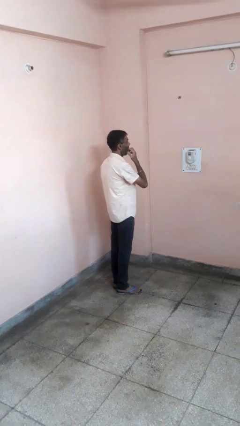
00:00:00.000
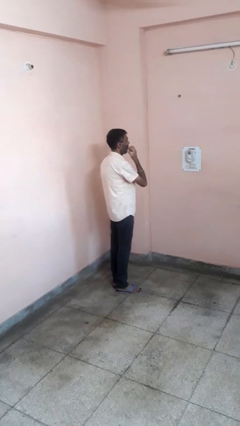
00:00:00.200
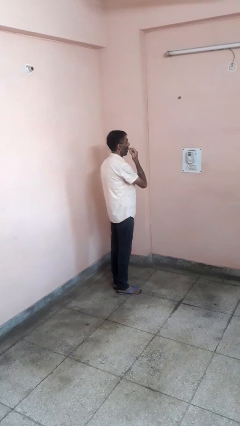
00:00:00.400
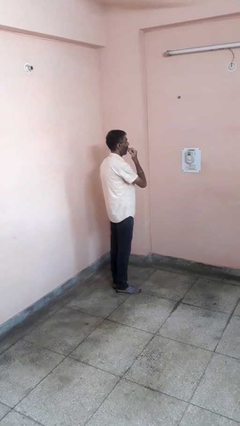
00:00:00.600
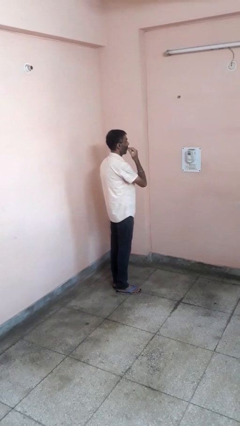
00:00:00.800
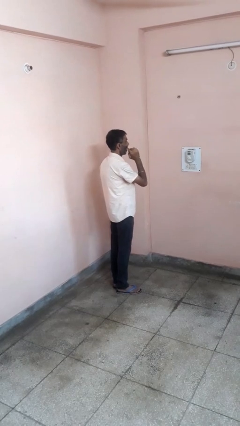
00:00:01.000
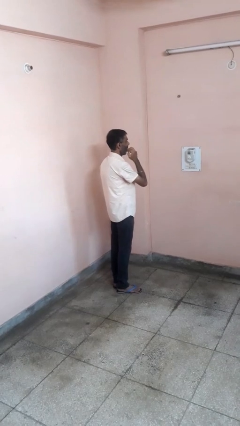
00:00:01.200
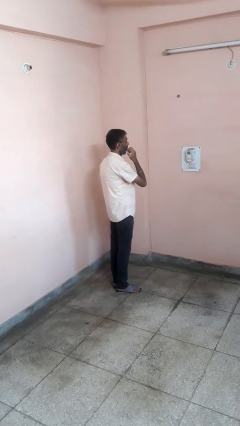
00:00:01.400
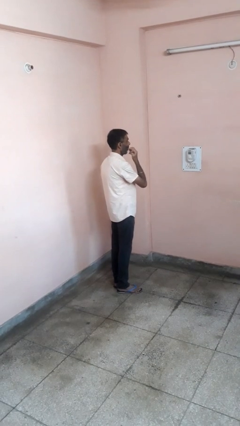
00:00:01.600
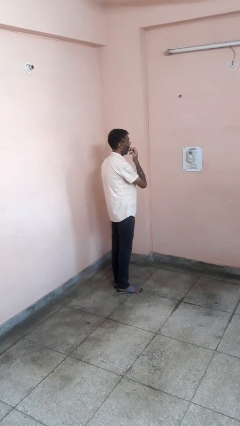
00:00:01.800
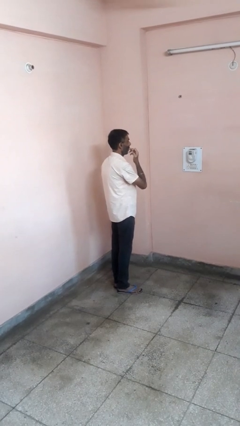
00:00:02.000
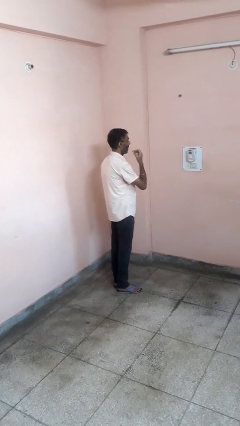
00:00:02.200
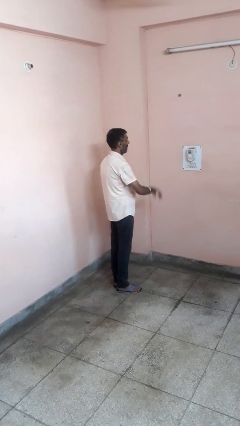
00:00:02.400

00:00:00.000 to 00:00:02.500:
person licks fingers

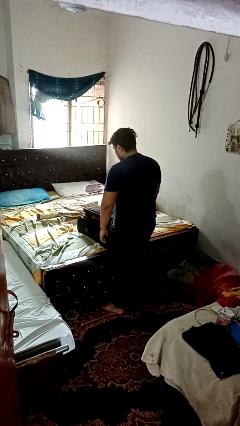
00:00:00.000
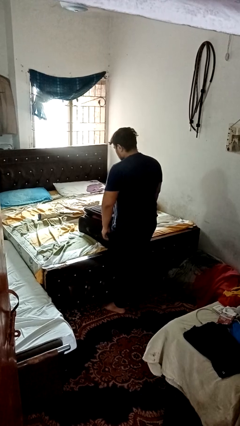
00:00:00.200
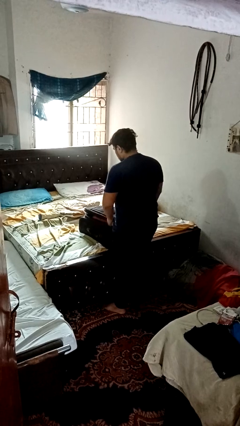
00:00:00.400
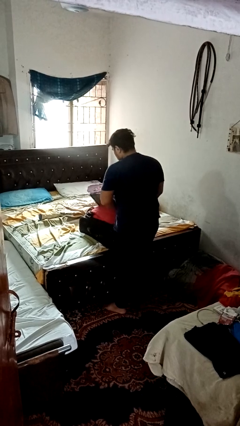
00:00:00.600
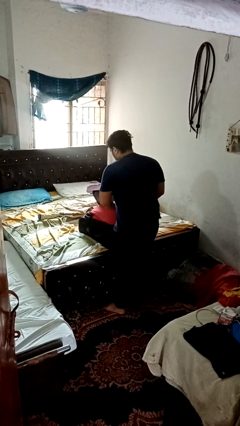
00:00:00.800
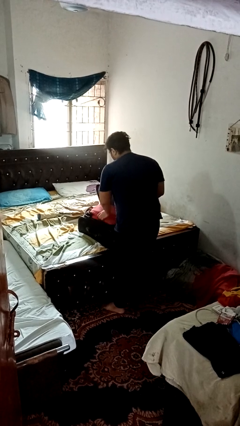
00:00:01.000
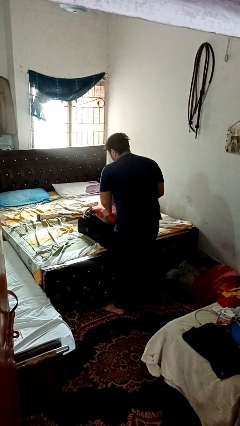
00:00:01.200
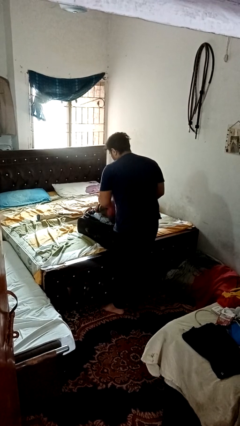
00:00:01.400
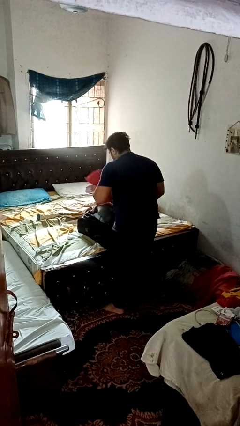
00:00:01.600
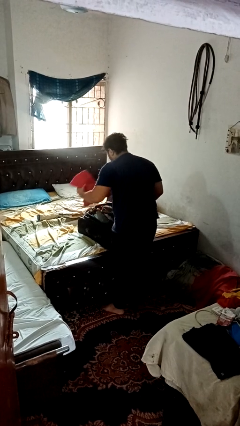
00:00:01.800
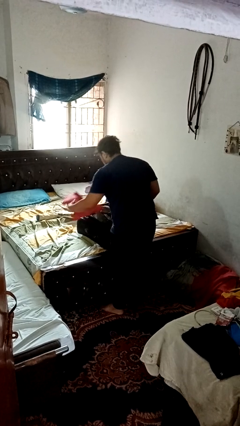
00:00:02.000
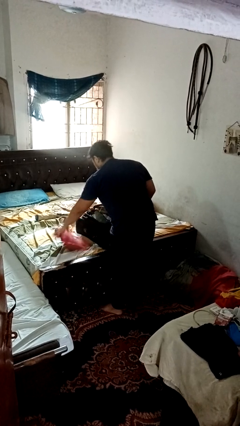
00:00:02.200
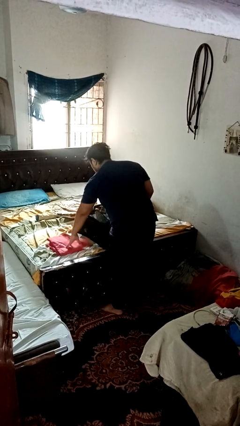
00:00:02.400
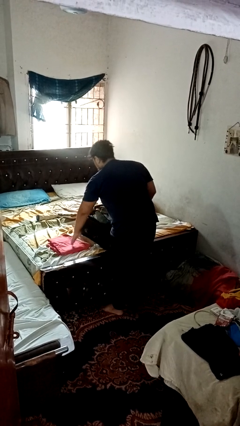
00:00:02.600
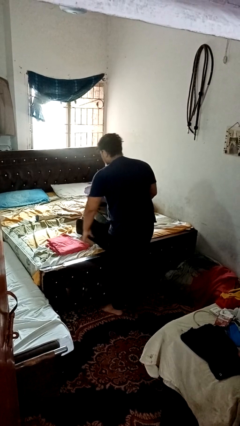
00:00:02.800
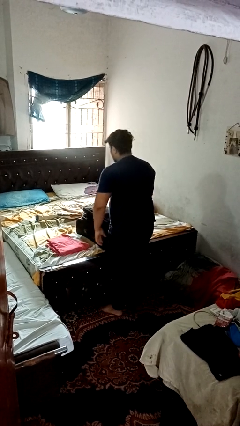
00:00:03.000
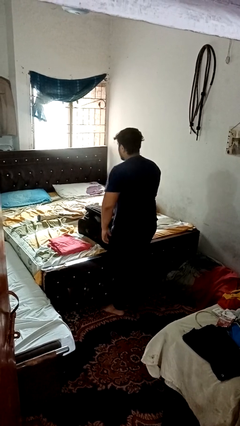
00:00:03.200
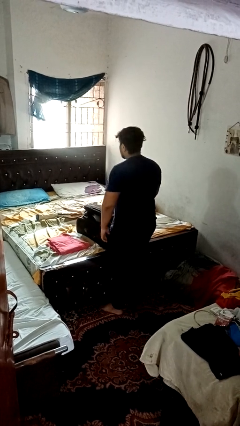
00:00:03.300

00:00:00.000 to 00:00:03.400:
person unloads clothes from suitcase

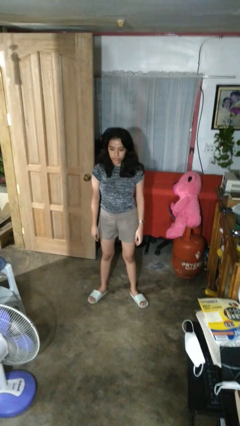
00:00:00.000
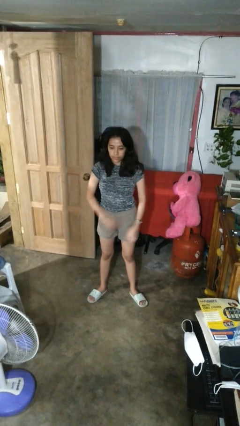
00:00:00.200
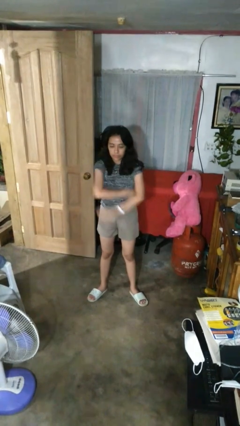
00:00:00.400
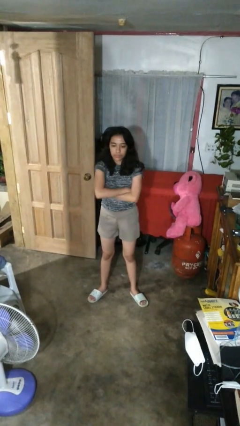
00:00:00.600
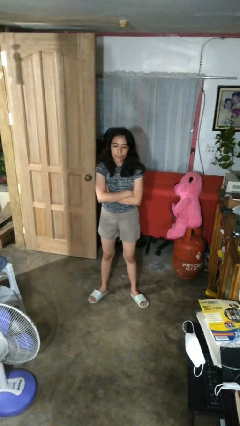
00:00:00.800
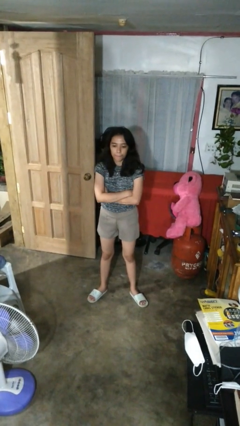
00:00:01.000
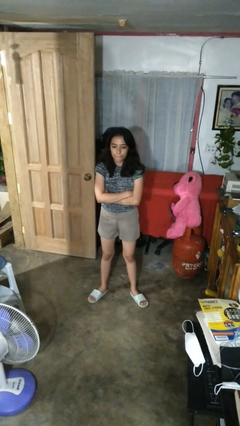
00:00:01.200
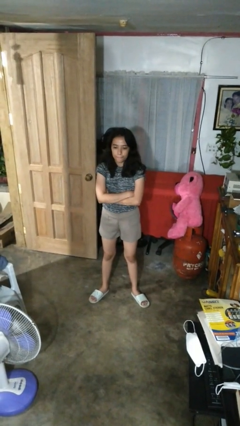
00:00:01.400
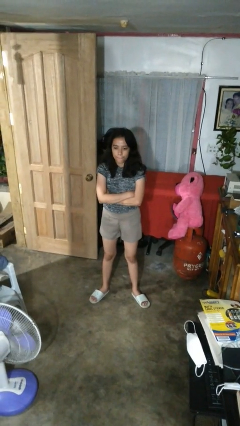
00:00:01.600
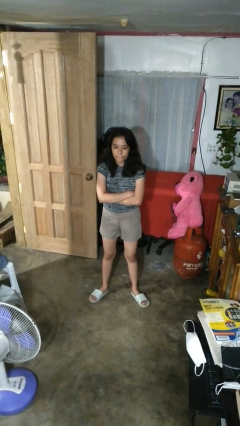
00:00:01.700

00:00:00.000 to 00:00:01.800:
person crosses arms

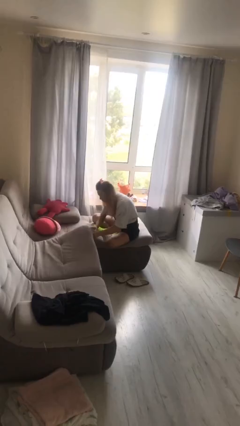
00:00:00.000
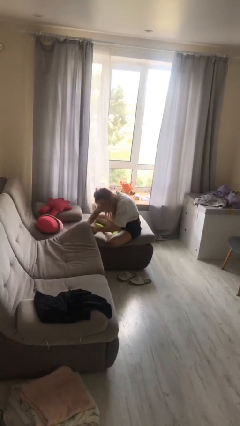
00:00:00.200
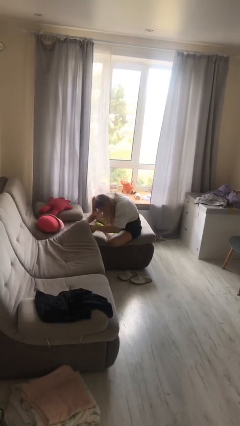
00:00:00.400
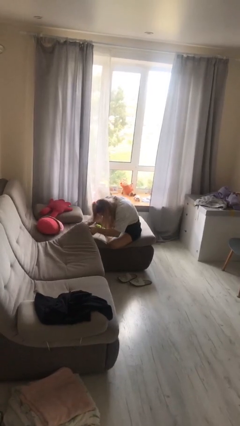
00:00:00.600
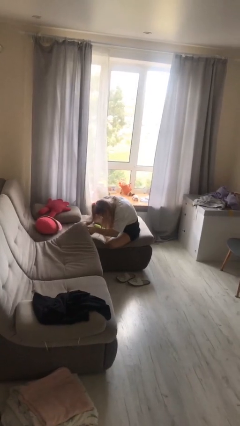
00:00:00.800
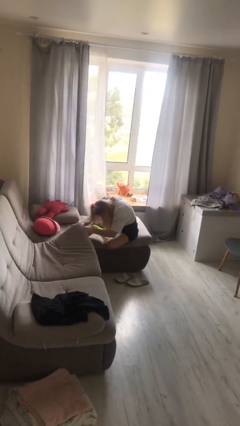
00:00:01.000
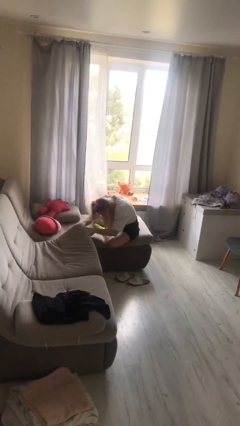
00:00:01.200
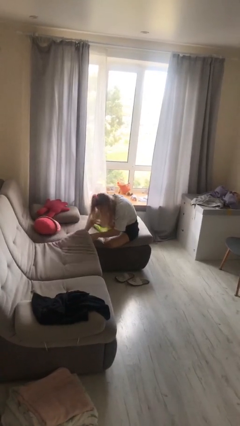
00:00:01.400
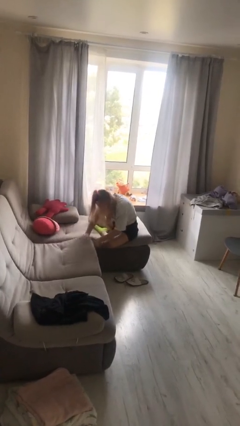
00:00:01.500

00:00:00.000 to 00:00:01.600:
person searches in couch

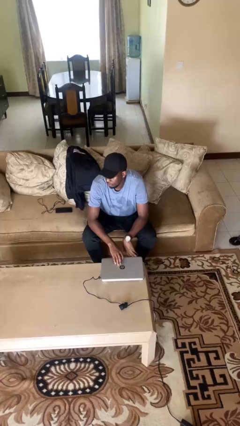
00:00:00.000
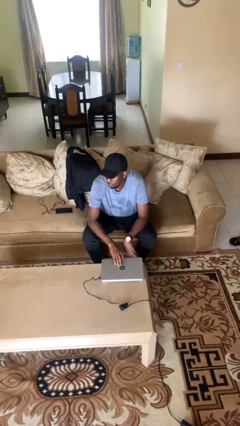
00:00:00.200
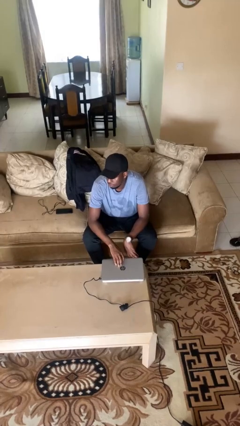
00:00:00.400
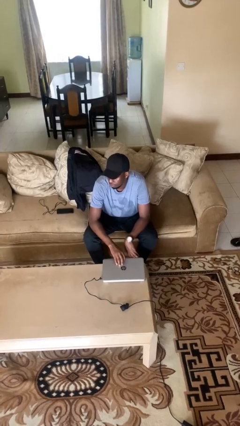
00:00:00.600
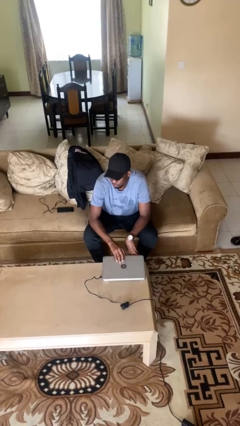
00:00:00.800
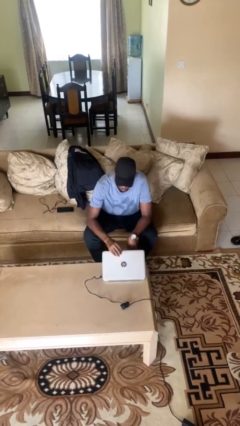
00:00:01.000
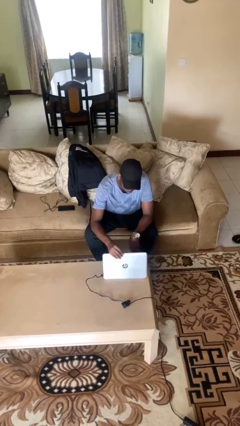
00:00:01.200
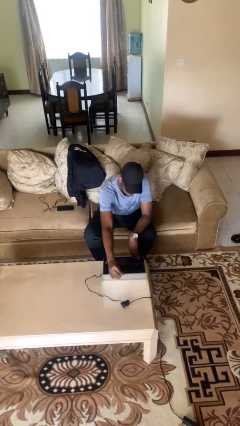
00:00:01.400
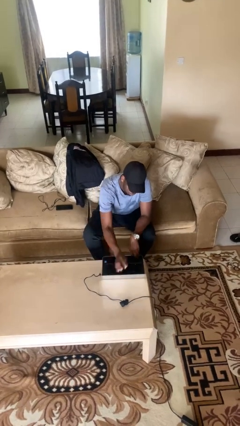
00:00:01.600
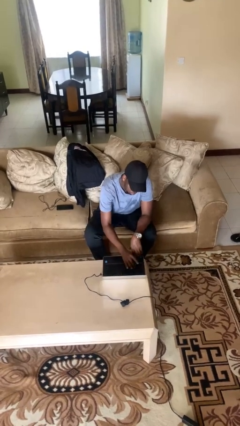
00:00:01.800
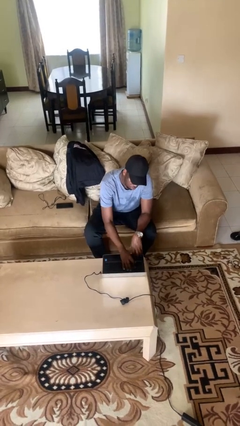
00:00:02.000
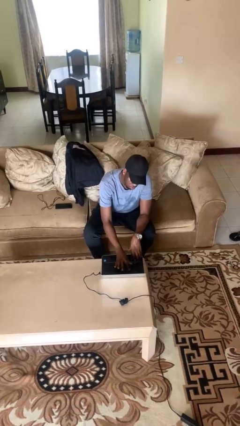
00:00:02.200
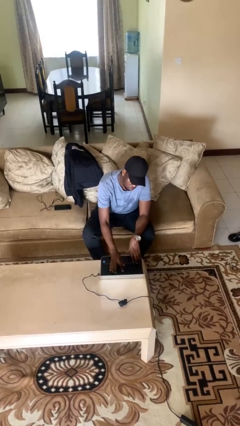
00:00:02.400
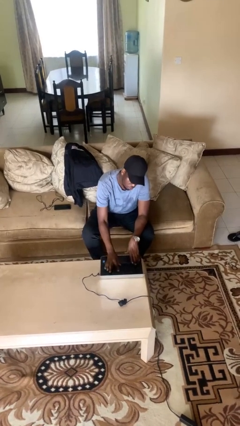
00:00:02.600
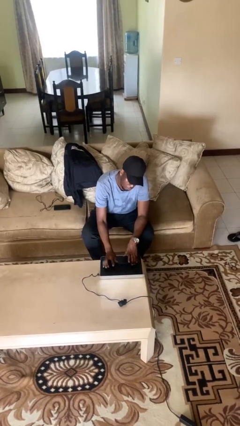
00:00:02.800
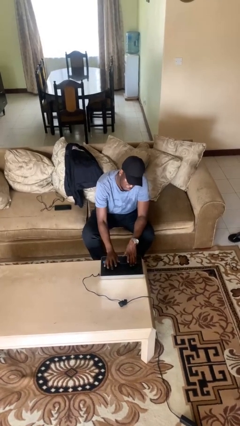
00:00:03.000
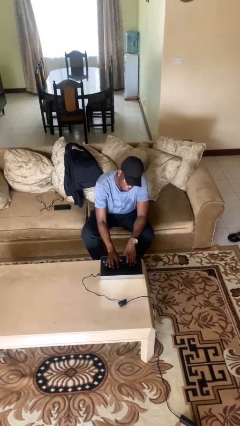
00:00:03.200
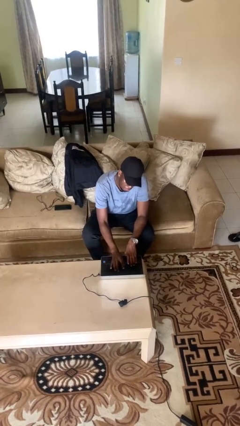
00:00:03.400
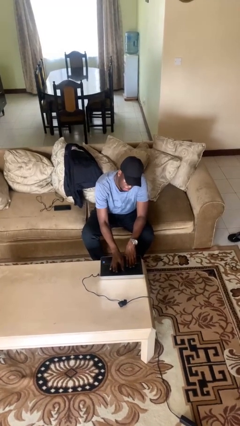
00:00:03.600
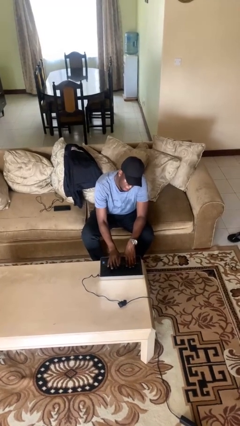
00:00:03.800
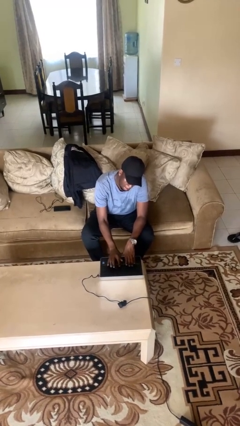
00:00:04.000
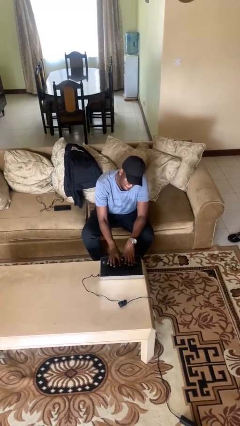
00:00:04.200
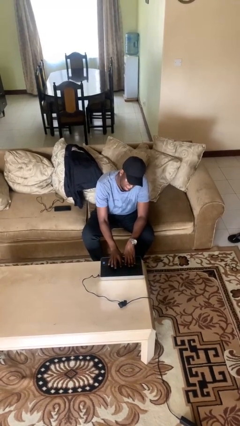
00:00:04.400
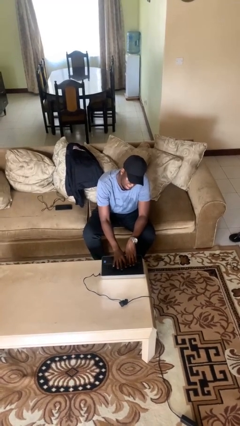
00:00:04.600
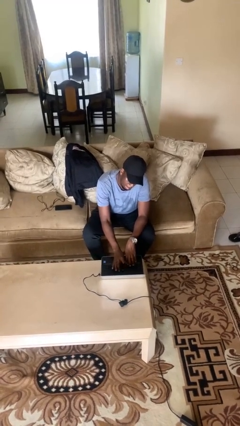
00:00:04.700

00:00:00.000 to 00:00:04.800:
person interacts with laptop

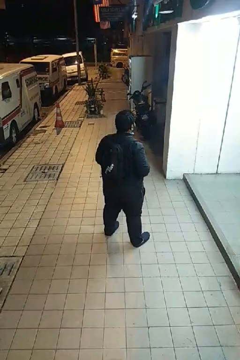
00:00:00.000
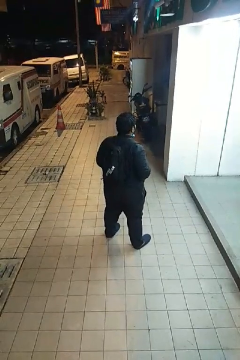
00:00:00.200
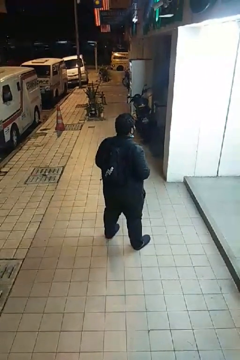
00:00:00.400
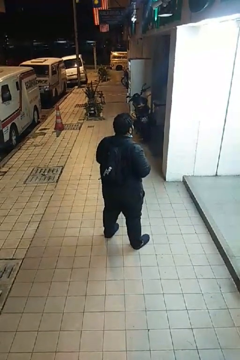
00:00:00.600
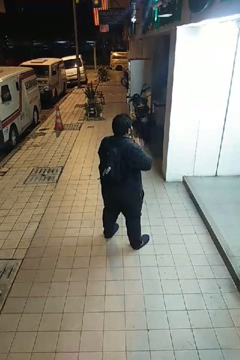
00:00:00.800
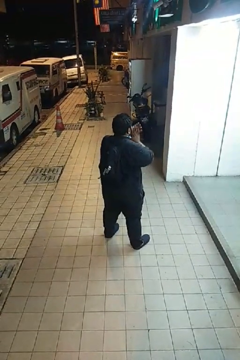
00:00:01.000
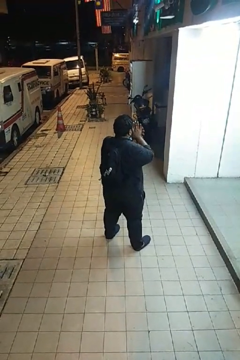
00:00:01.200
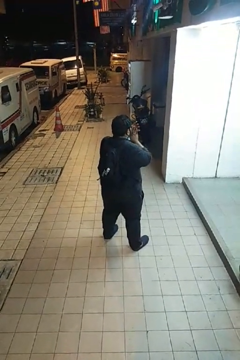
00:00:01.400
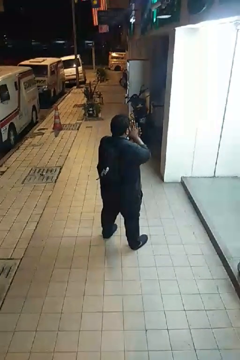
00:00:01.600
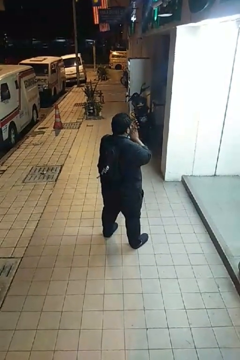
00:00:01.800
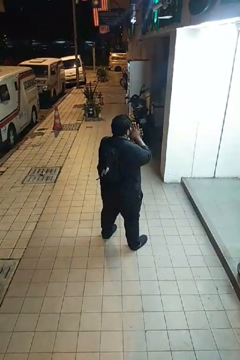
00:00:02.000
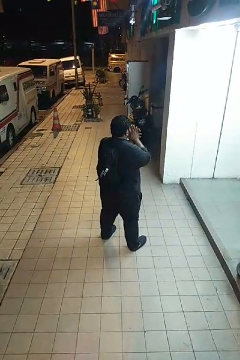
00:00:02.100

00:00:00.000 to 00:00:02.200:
person blows into hands

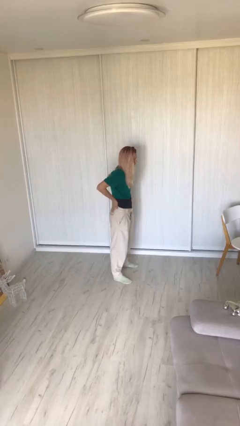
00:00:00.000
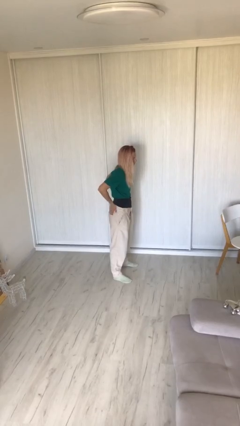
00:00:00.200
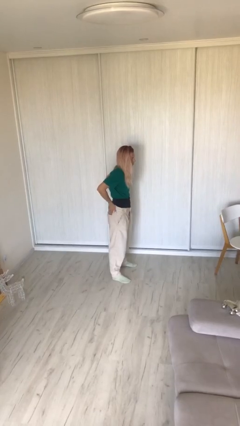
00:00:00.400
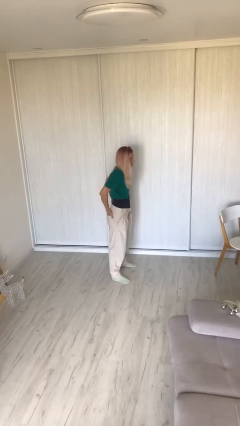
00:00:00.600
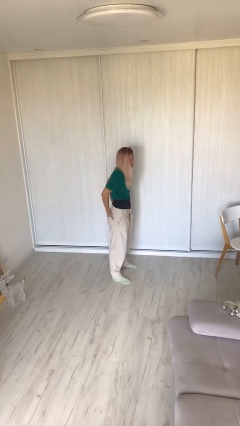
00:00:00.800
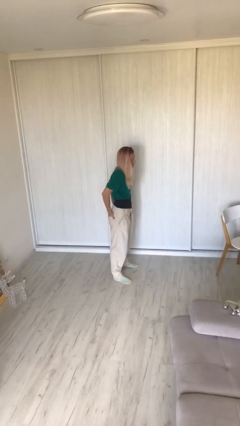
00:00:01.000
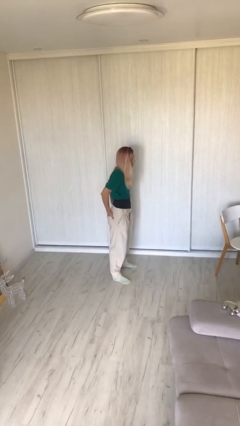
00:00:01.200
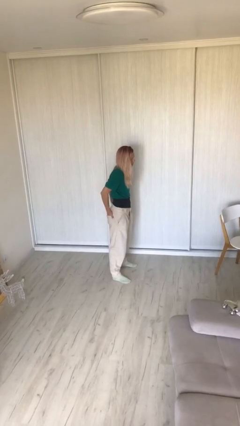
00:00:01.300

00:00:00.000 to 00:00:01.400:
person puts hands in back pockets
